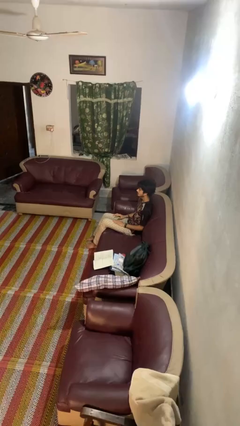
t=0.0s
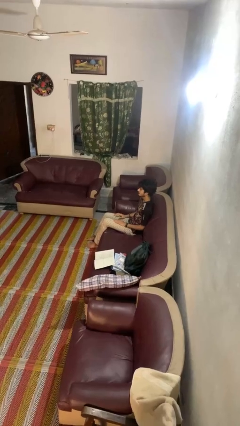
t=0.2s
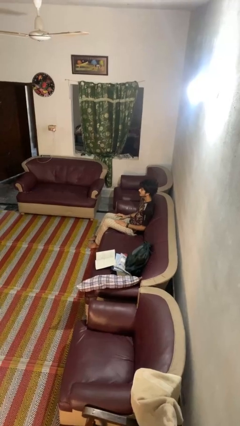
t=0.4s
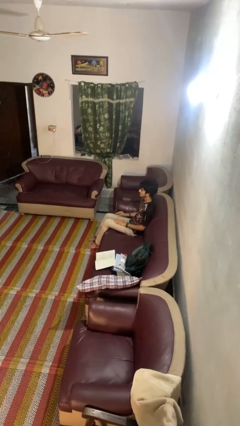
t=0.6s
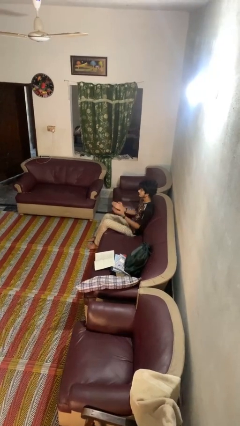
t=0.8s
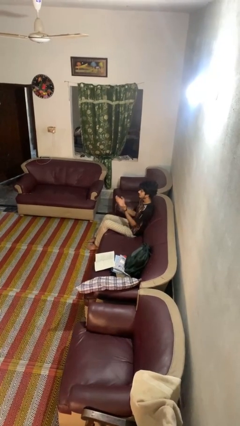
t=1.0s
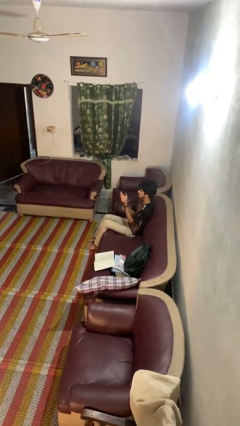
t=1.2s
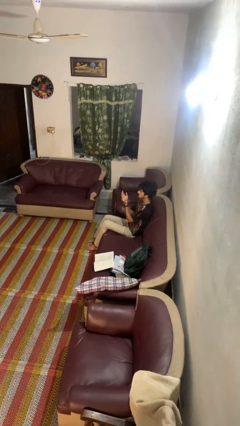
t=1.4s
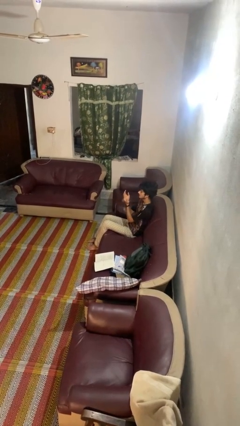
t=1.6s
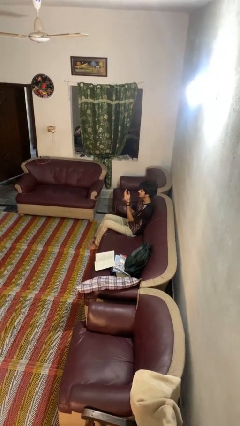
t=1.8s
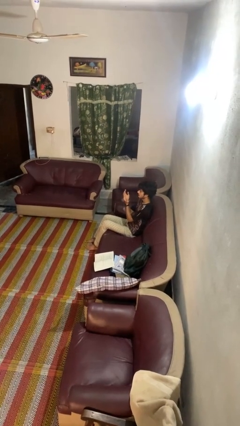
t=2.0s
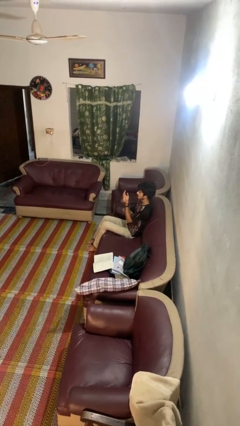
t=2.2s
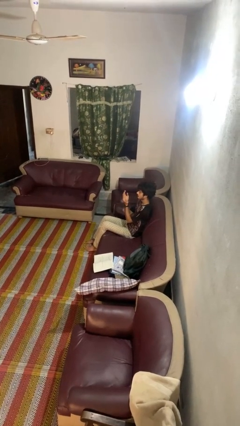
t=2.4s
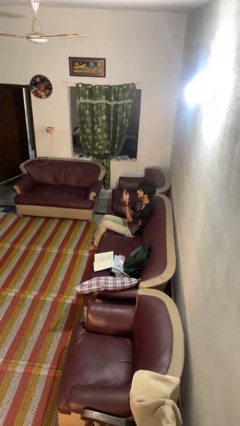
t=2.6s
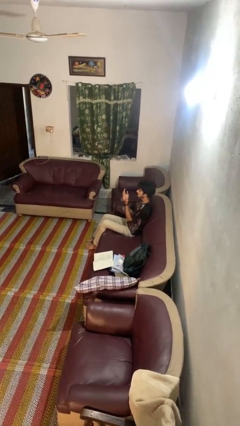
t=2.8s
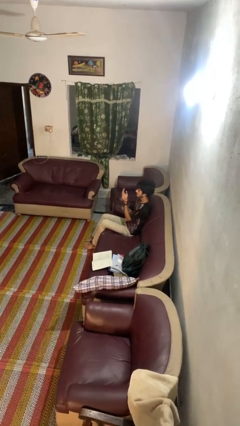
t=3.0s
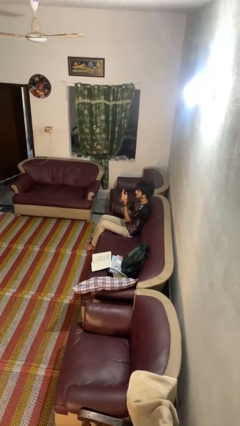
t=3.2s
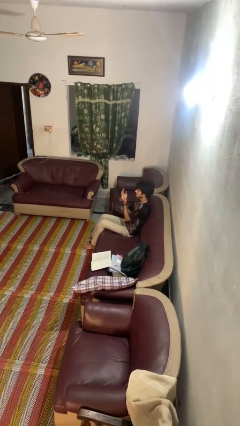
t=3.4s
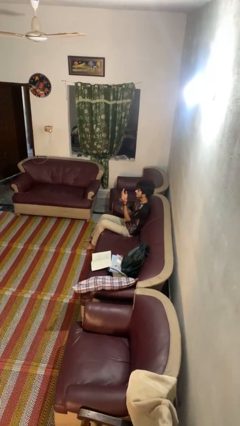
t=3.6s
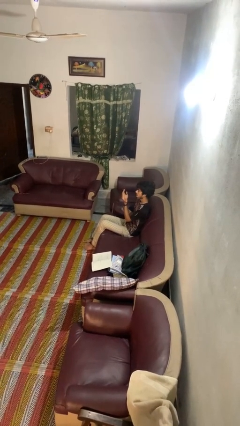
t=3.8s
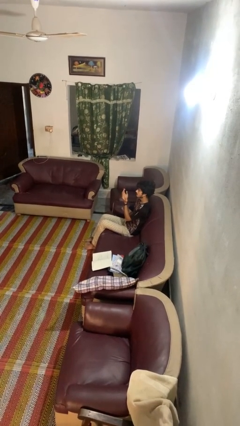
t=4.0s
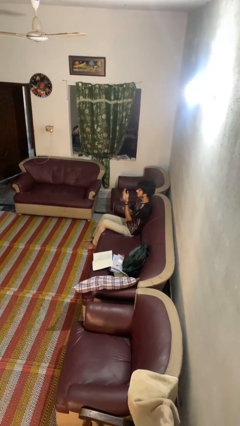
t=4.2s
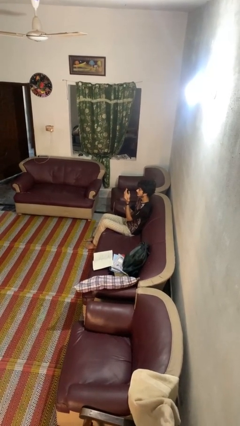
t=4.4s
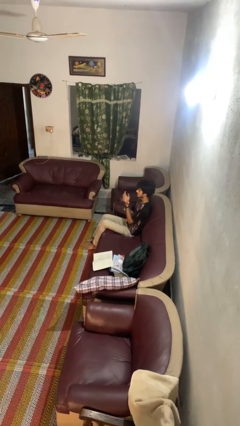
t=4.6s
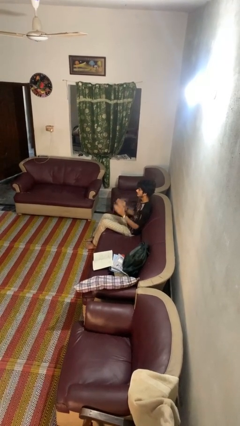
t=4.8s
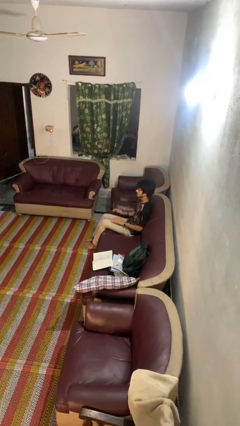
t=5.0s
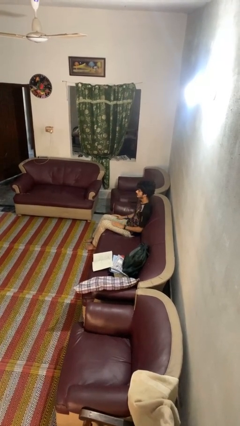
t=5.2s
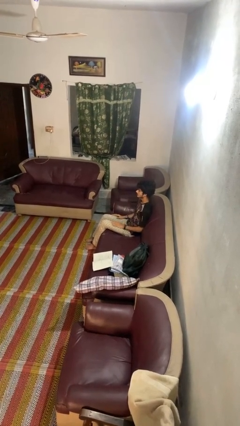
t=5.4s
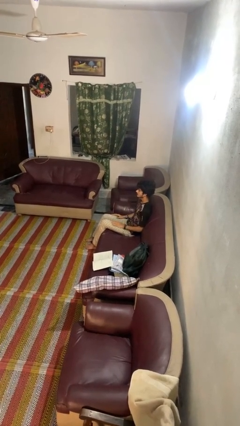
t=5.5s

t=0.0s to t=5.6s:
person prays

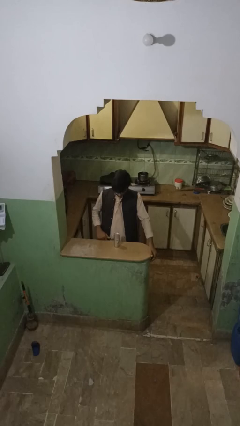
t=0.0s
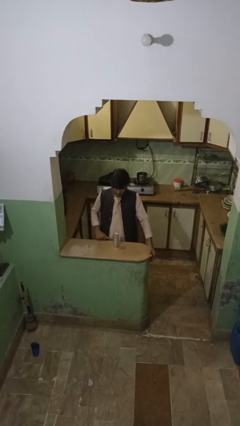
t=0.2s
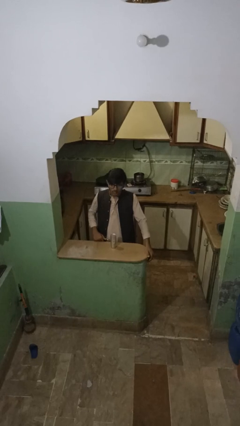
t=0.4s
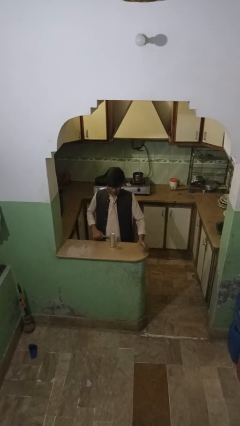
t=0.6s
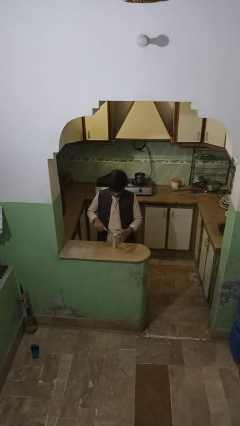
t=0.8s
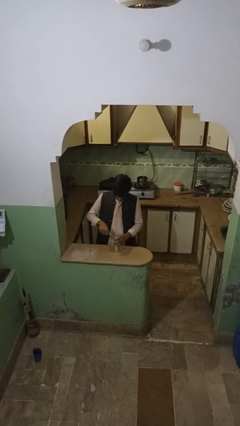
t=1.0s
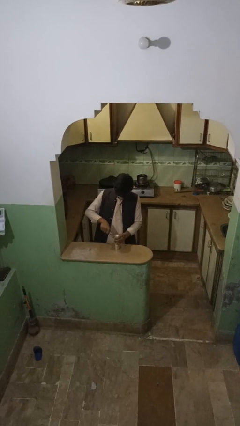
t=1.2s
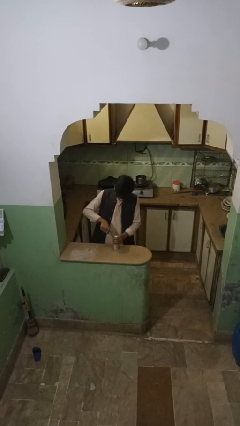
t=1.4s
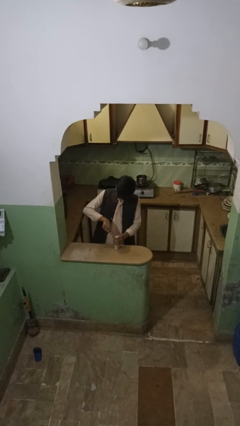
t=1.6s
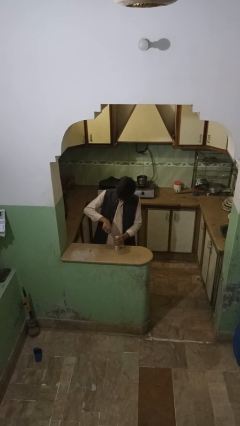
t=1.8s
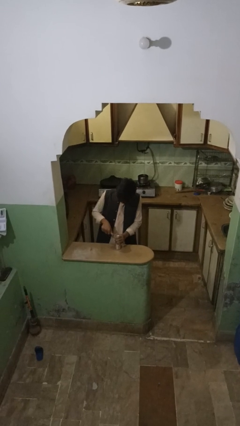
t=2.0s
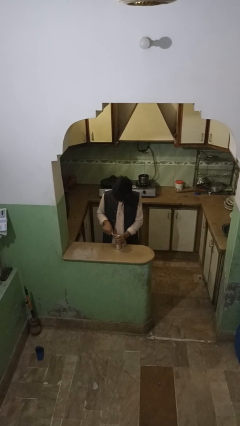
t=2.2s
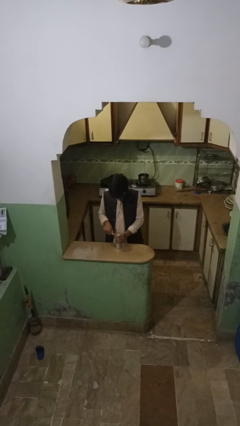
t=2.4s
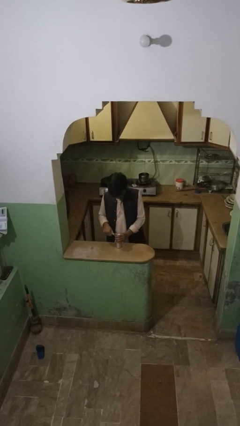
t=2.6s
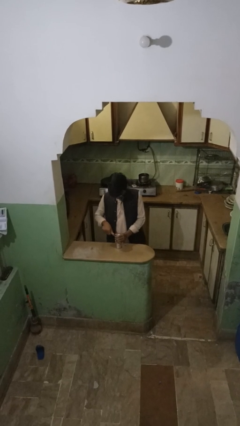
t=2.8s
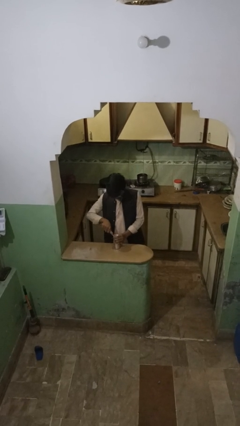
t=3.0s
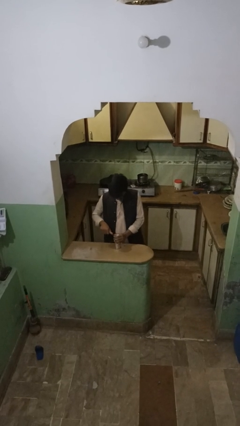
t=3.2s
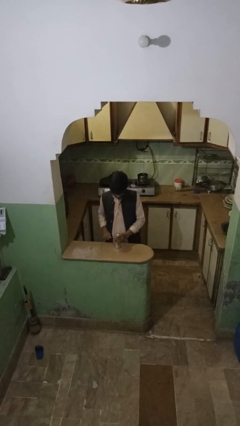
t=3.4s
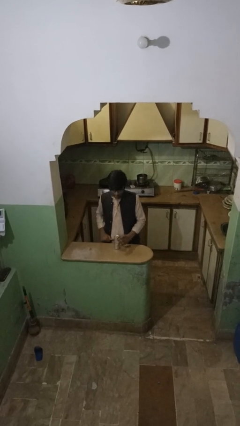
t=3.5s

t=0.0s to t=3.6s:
person opens can with can opener

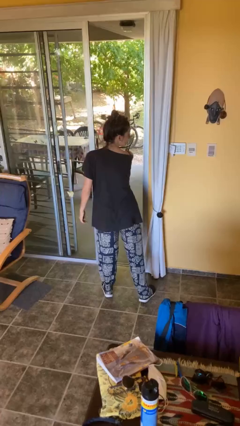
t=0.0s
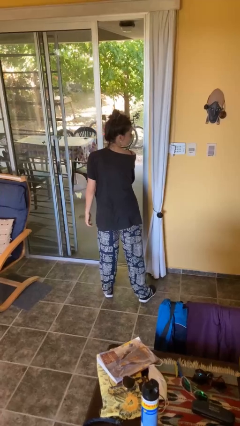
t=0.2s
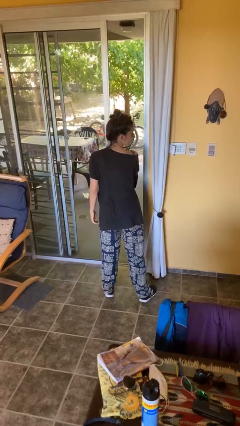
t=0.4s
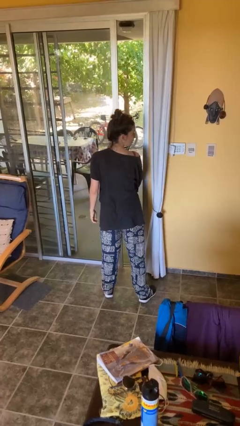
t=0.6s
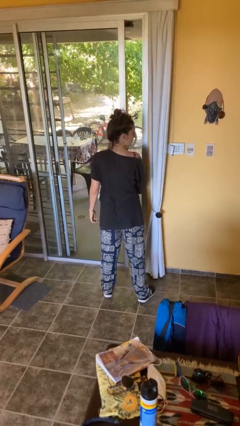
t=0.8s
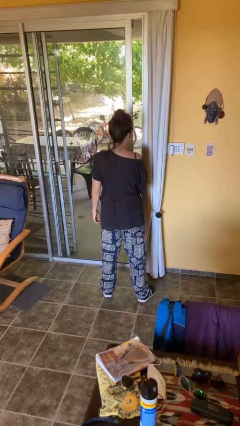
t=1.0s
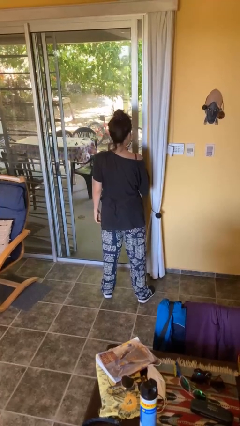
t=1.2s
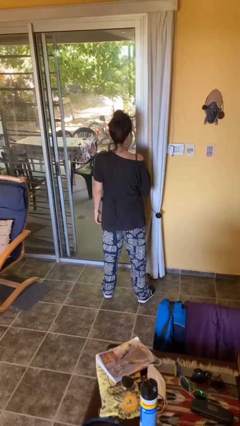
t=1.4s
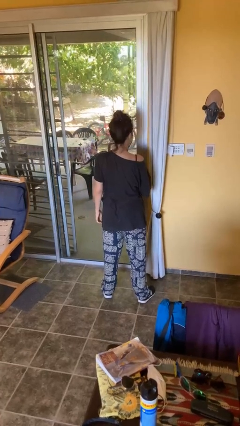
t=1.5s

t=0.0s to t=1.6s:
person closes facility door

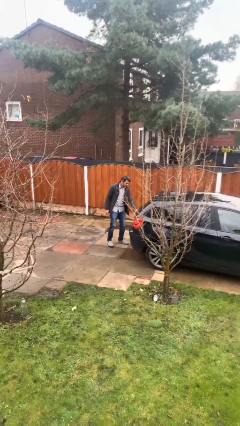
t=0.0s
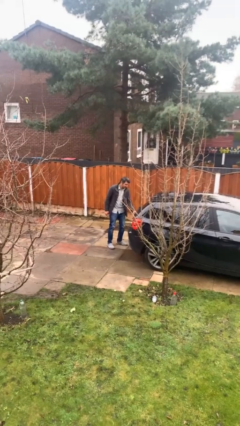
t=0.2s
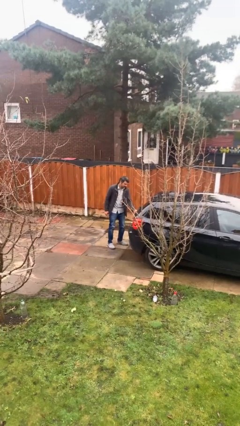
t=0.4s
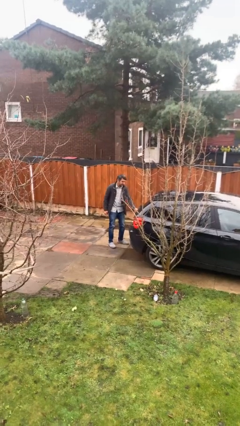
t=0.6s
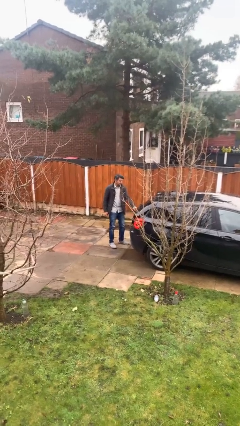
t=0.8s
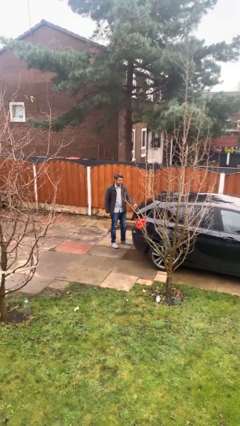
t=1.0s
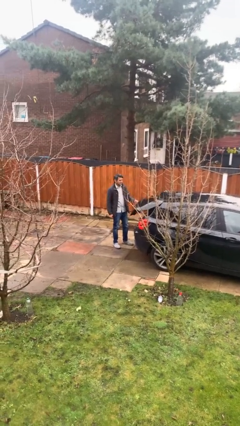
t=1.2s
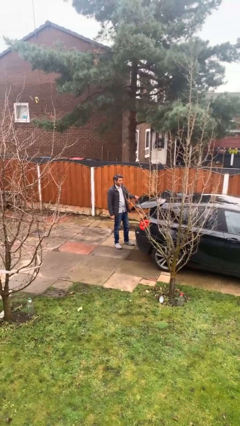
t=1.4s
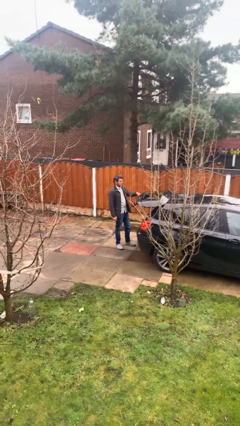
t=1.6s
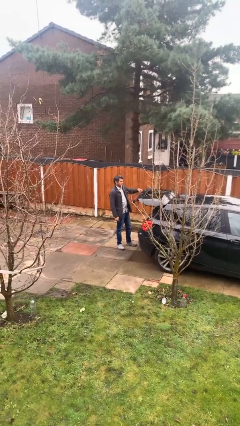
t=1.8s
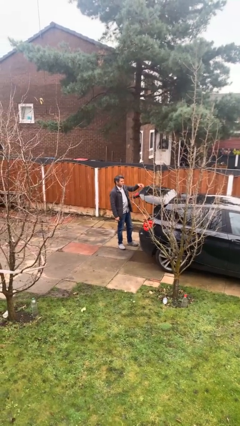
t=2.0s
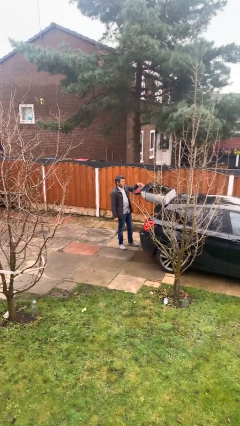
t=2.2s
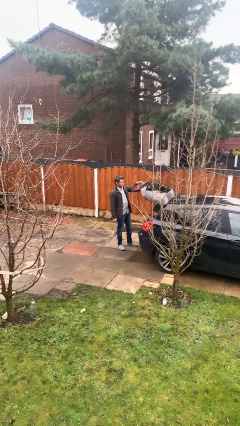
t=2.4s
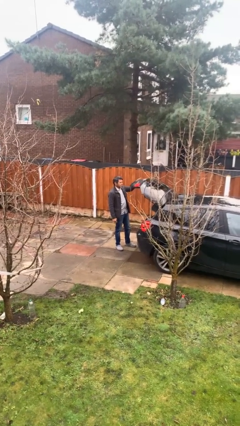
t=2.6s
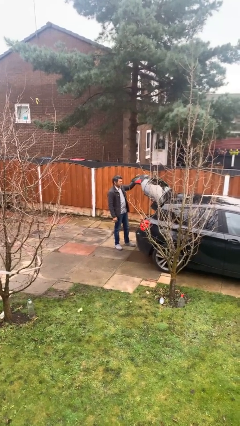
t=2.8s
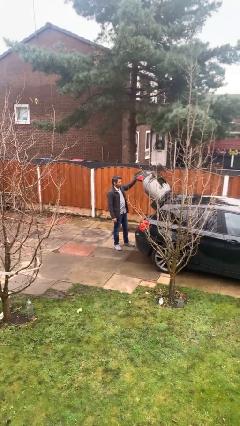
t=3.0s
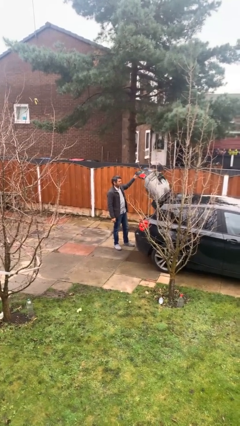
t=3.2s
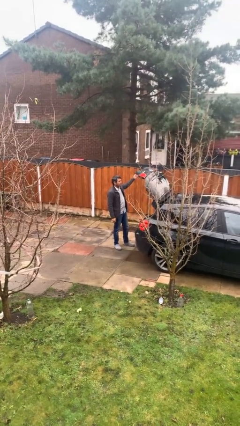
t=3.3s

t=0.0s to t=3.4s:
person opens car trunk

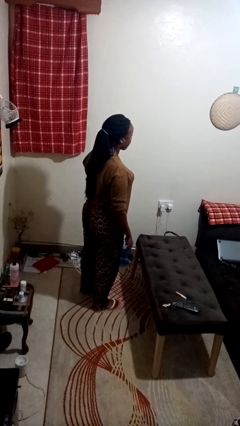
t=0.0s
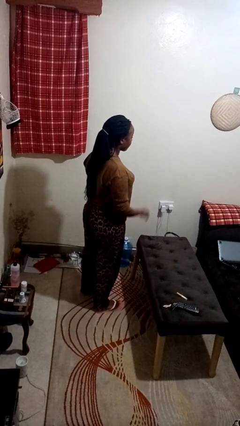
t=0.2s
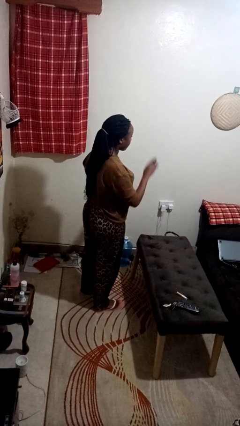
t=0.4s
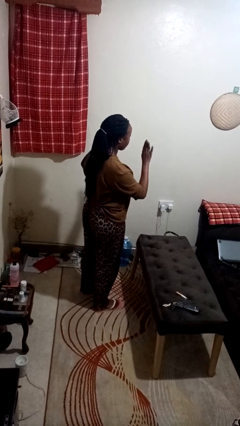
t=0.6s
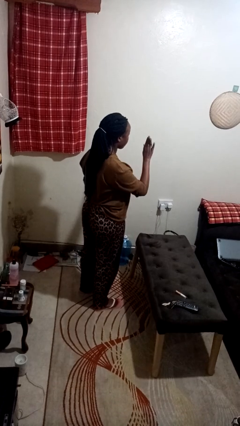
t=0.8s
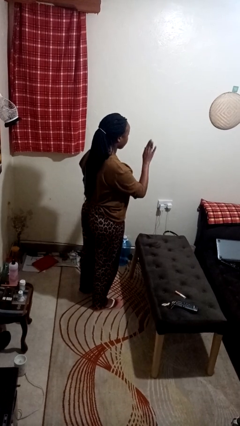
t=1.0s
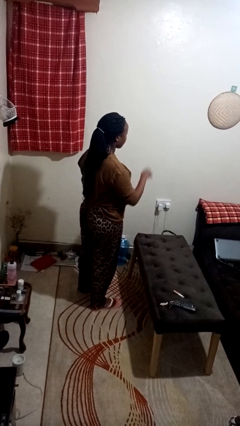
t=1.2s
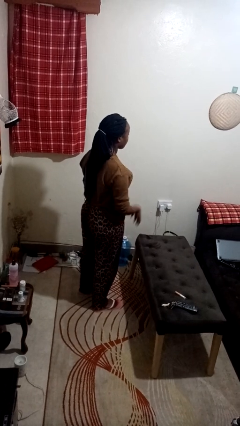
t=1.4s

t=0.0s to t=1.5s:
person gestures stop

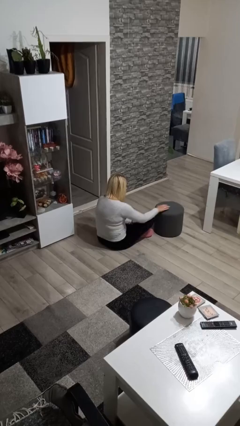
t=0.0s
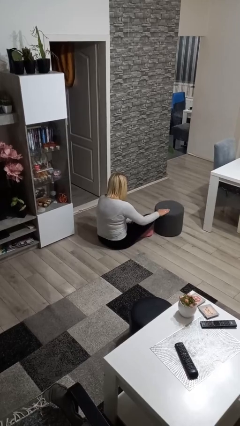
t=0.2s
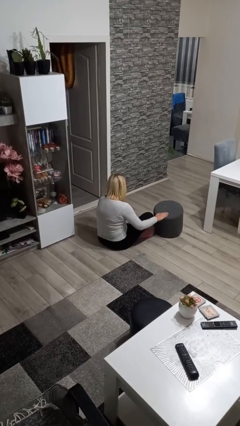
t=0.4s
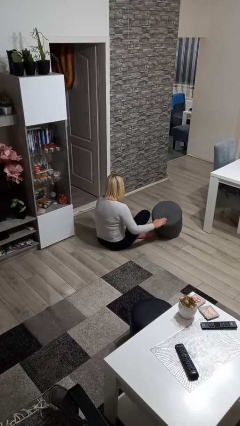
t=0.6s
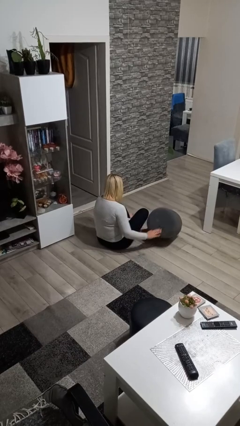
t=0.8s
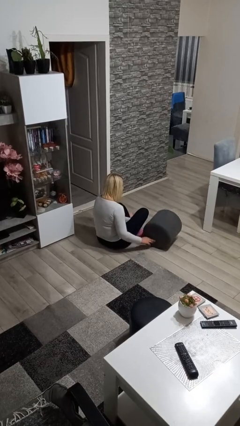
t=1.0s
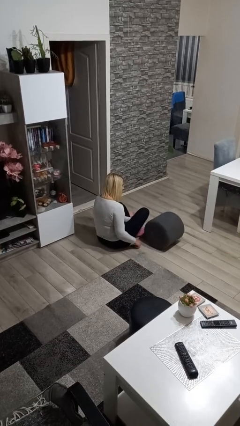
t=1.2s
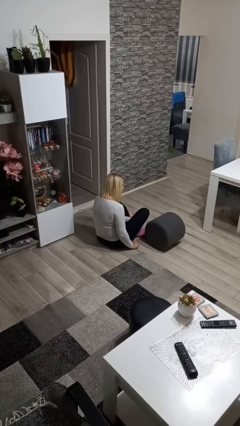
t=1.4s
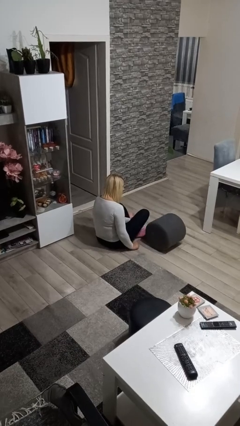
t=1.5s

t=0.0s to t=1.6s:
person knocks over furniture
